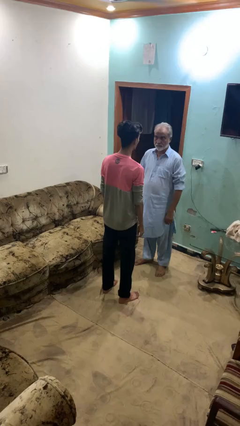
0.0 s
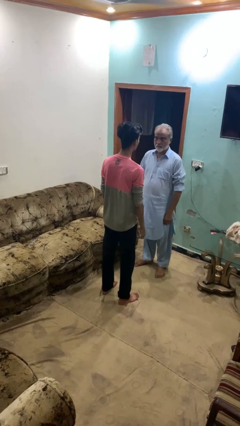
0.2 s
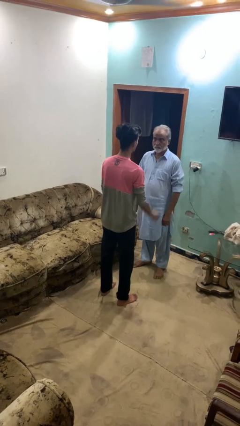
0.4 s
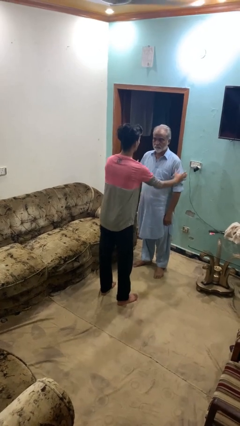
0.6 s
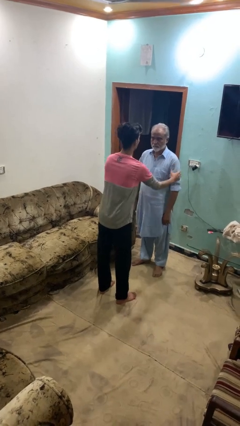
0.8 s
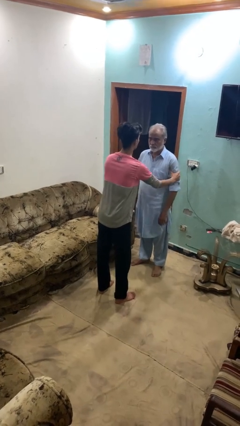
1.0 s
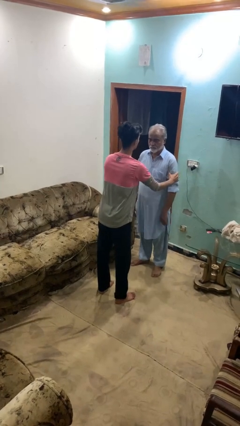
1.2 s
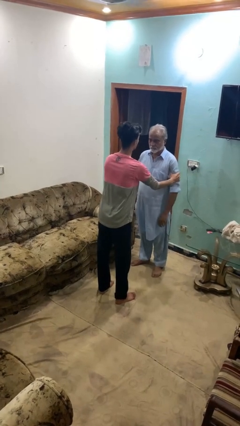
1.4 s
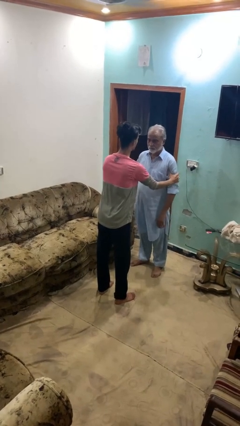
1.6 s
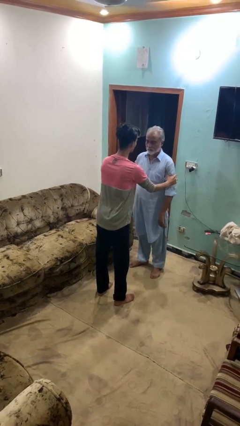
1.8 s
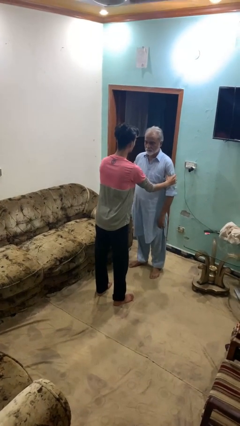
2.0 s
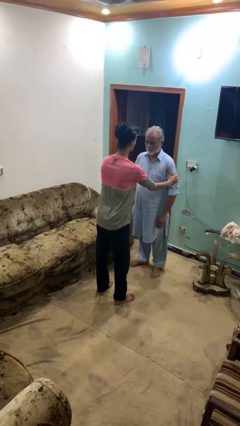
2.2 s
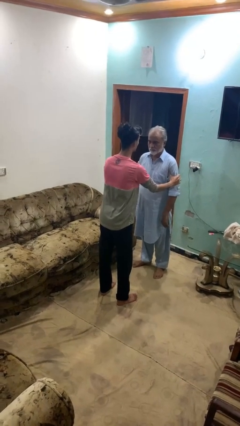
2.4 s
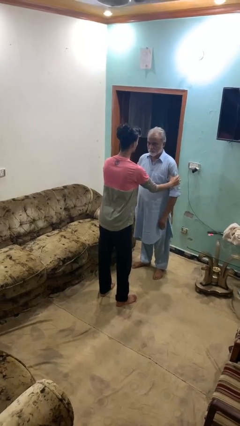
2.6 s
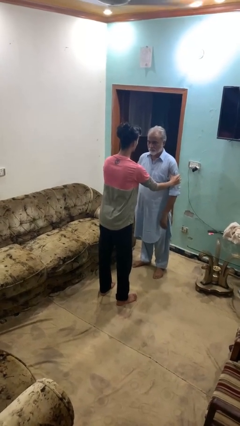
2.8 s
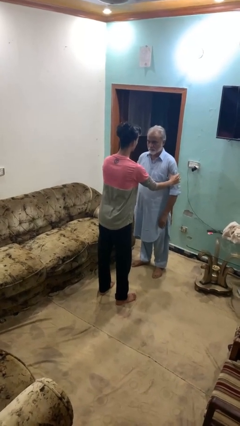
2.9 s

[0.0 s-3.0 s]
person grabs person by bicep

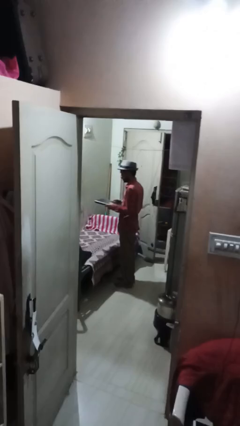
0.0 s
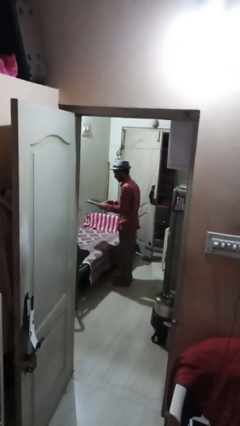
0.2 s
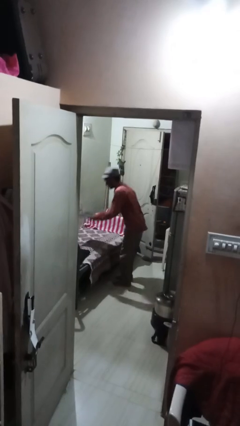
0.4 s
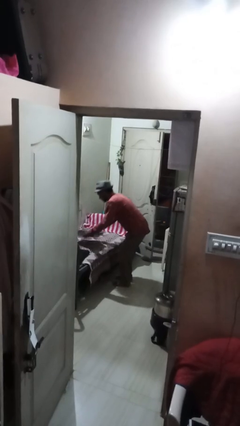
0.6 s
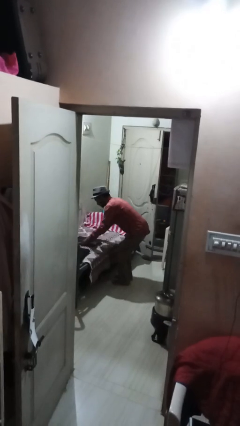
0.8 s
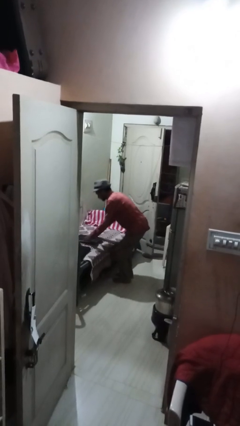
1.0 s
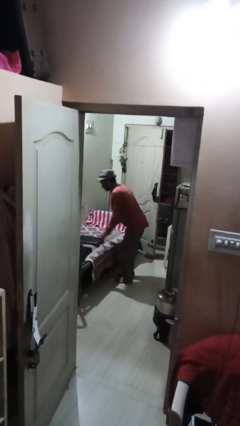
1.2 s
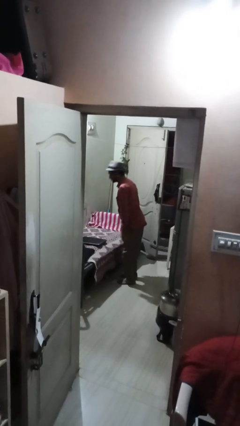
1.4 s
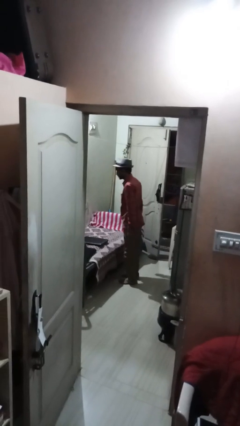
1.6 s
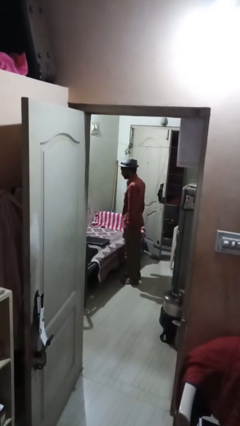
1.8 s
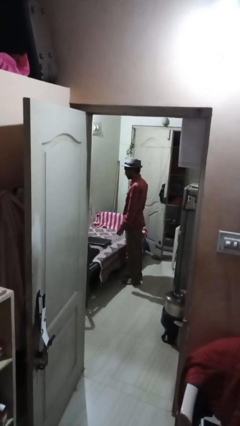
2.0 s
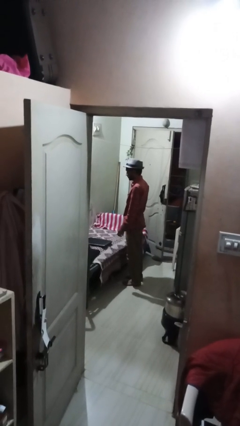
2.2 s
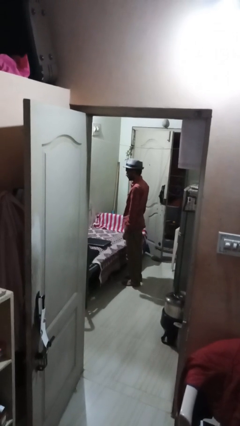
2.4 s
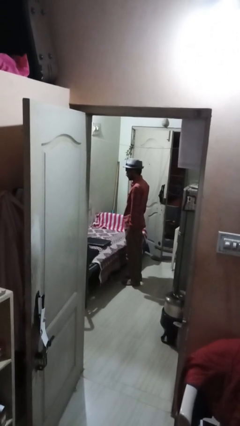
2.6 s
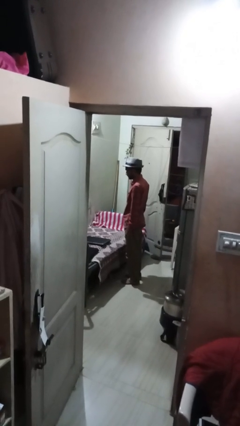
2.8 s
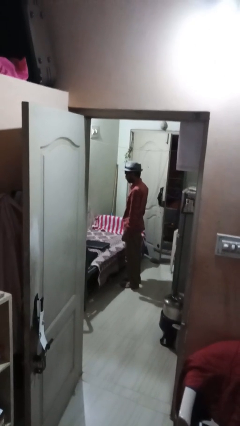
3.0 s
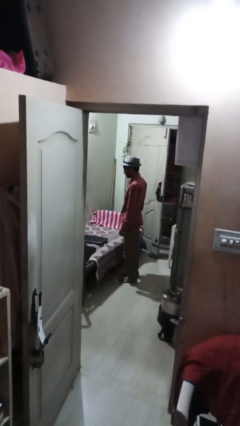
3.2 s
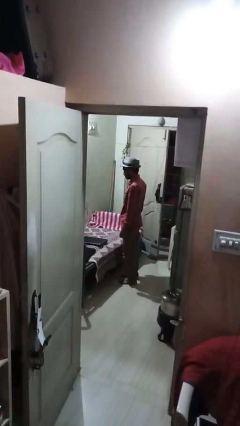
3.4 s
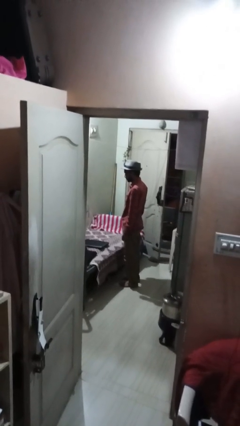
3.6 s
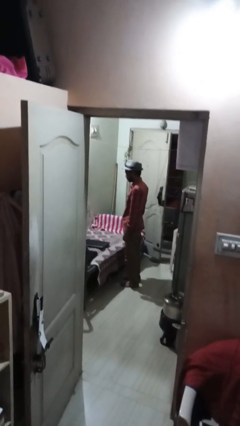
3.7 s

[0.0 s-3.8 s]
person puts down object on couch

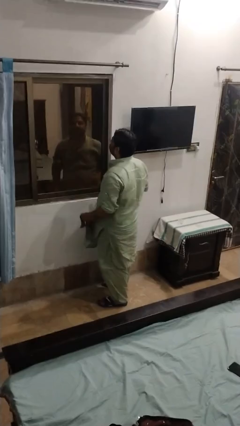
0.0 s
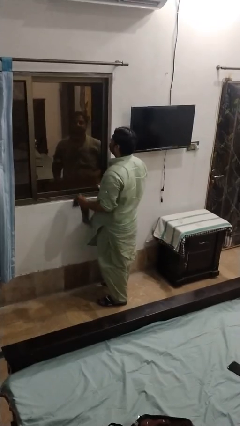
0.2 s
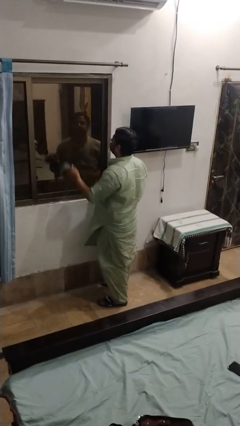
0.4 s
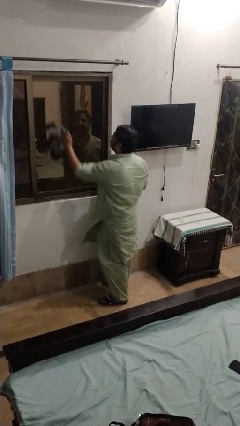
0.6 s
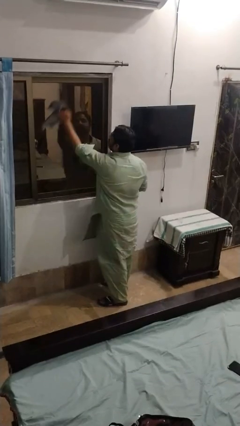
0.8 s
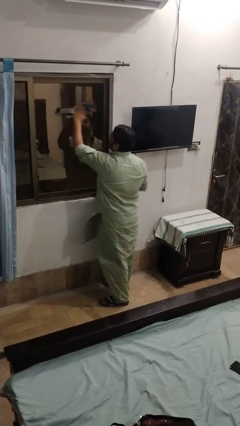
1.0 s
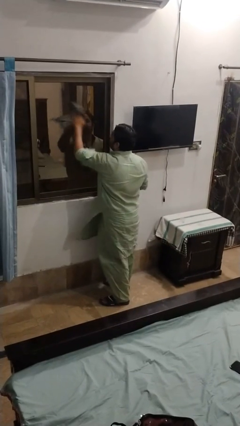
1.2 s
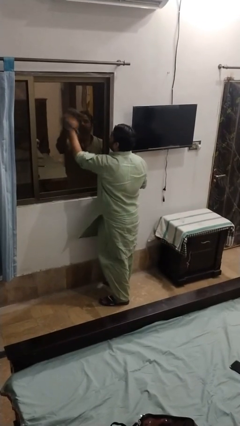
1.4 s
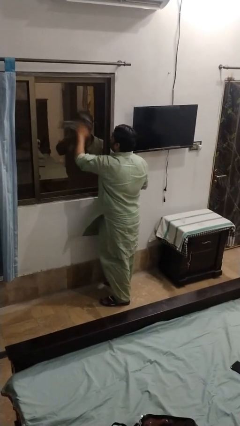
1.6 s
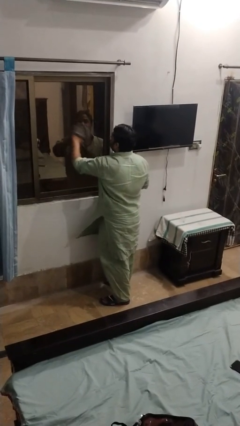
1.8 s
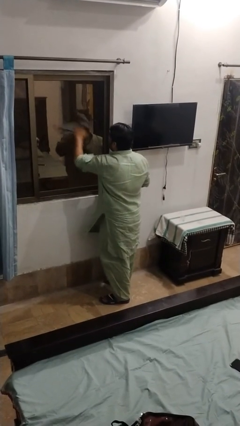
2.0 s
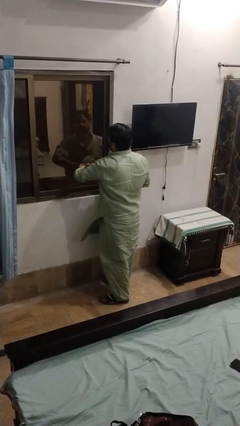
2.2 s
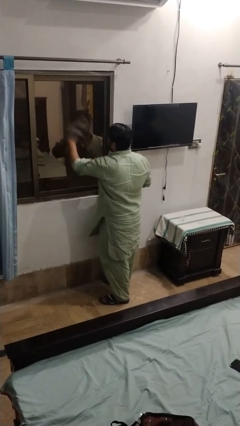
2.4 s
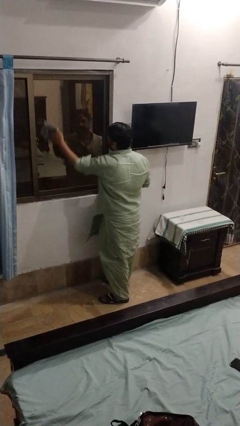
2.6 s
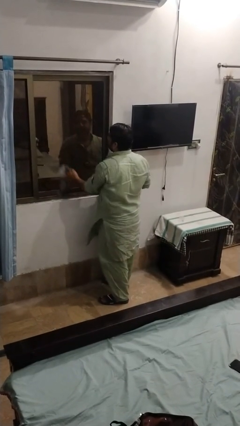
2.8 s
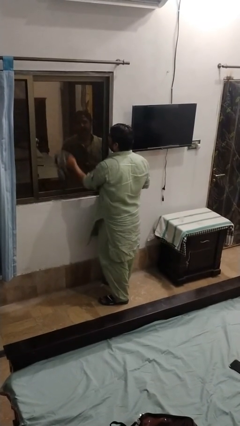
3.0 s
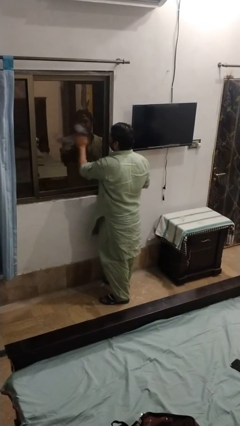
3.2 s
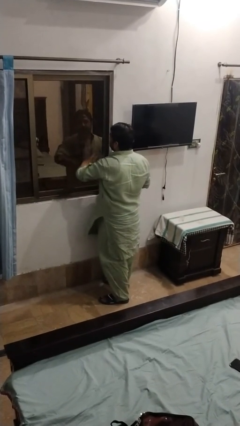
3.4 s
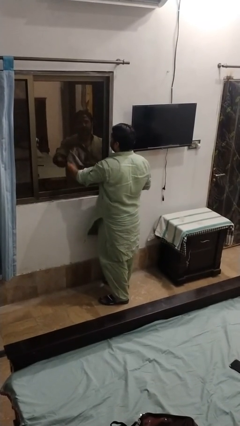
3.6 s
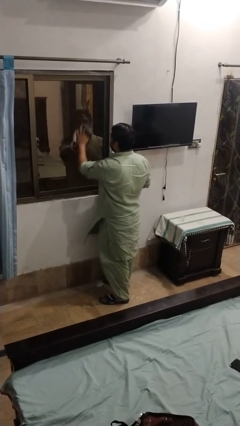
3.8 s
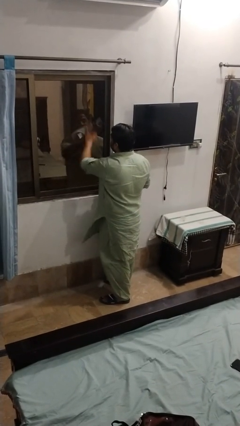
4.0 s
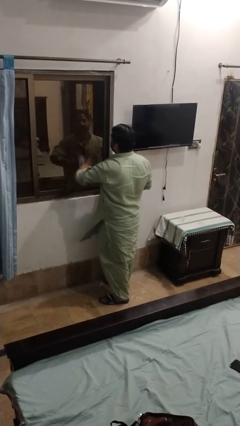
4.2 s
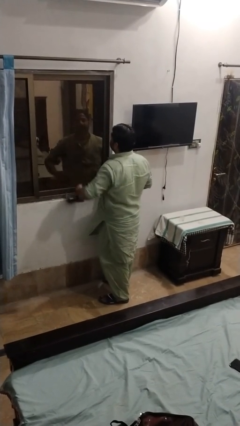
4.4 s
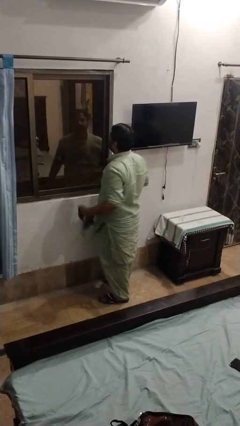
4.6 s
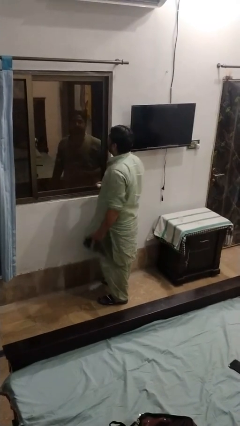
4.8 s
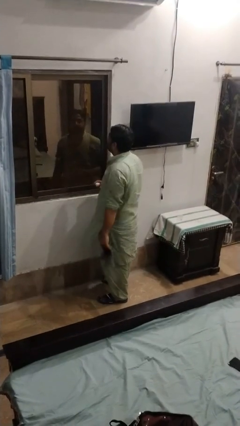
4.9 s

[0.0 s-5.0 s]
person washes window

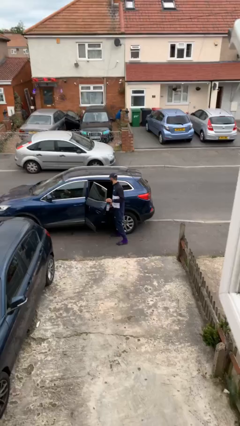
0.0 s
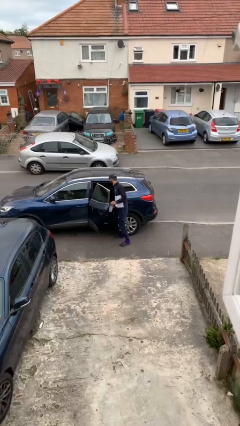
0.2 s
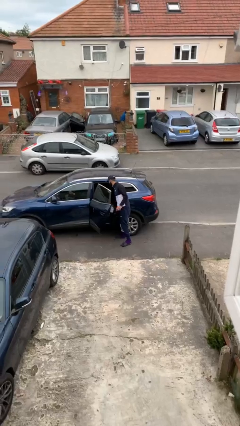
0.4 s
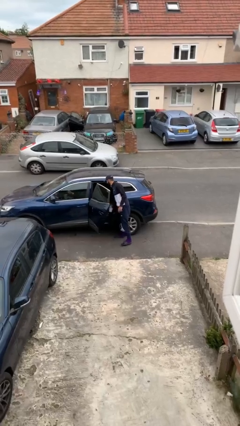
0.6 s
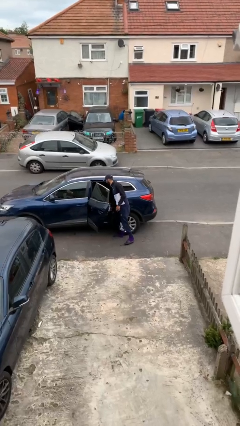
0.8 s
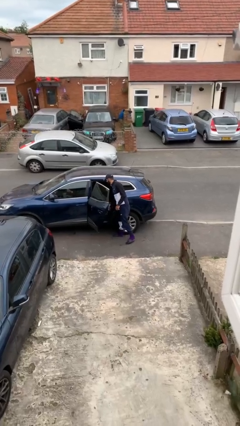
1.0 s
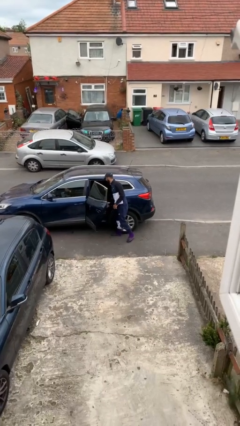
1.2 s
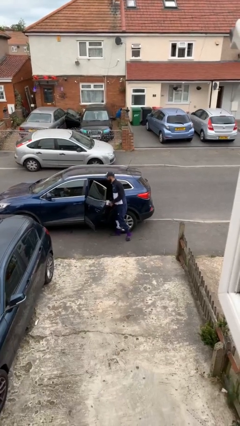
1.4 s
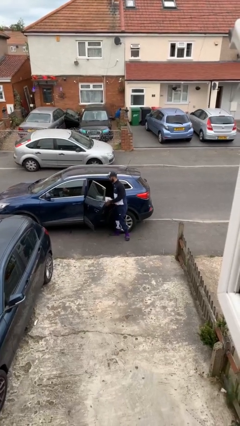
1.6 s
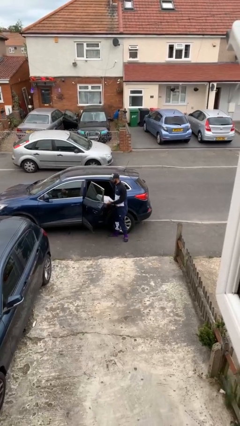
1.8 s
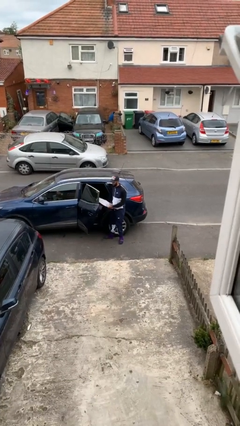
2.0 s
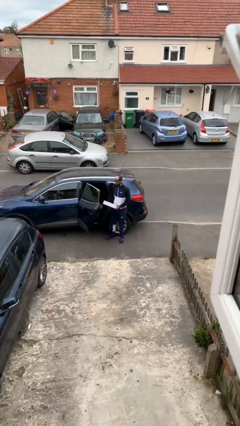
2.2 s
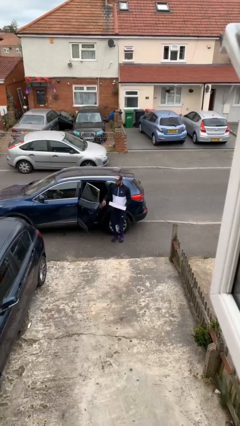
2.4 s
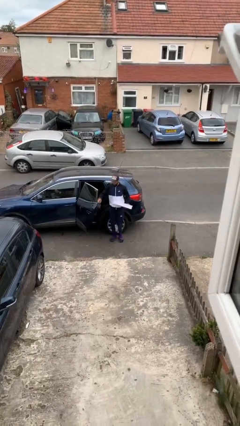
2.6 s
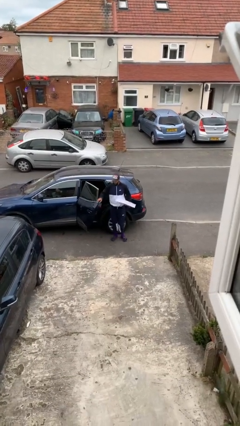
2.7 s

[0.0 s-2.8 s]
person unloads car

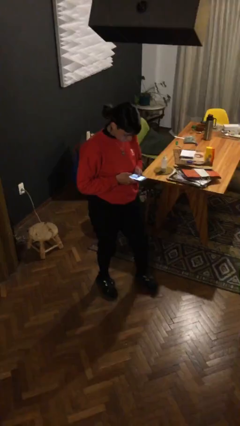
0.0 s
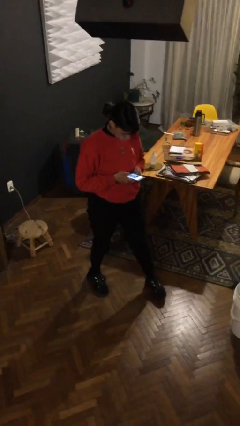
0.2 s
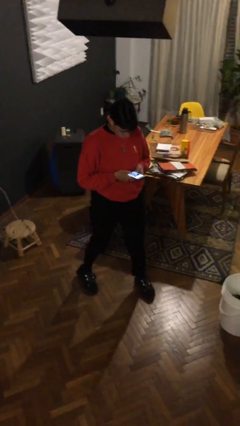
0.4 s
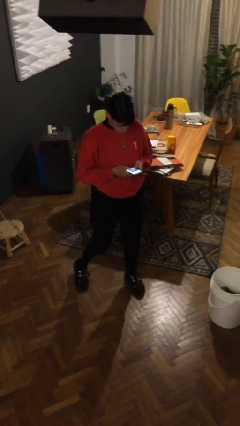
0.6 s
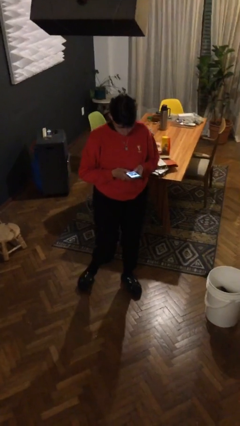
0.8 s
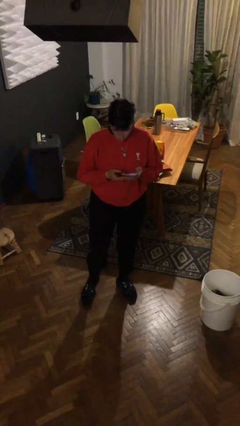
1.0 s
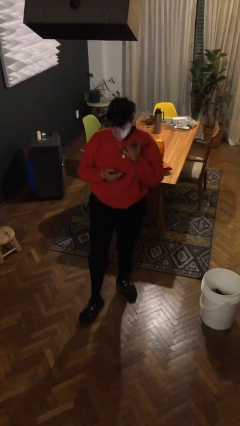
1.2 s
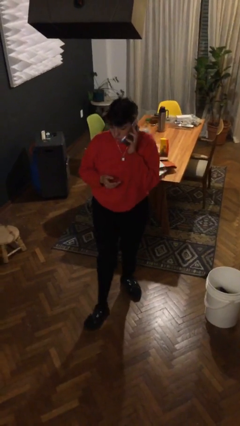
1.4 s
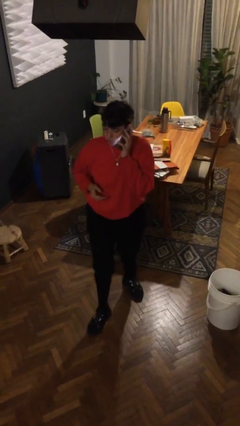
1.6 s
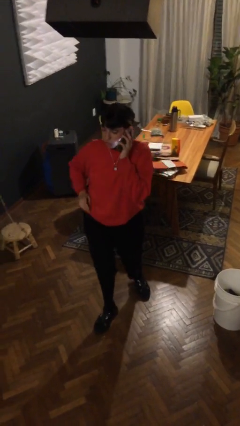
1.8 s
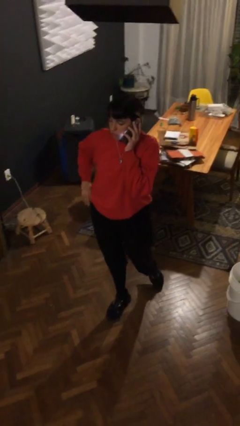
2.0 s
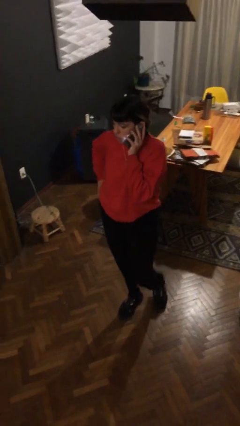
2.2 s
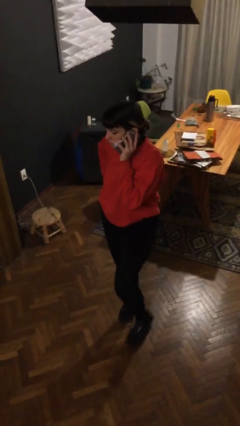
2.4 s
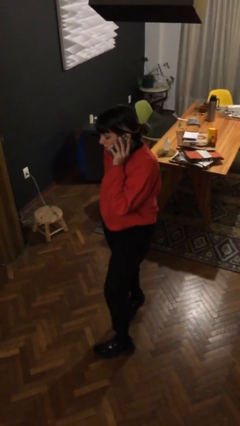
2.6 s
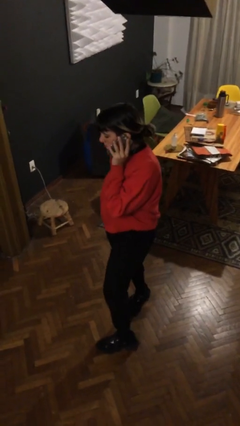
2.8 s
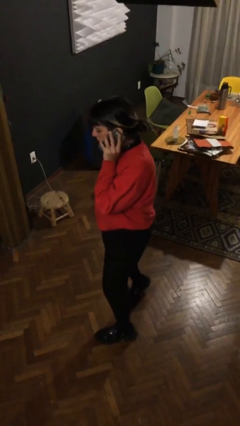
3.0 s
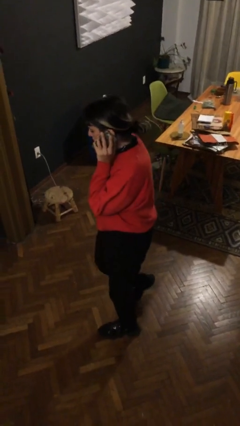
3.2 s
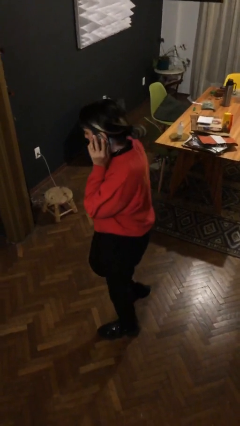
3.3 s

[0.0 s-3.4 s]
person talks on phone
